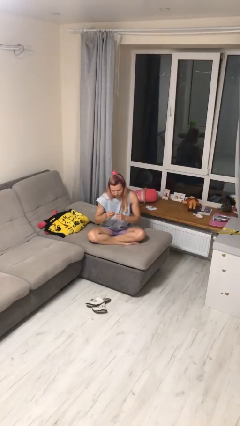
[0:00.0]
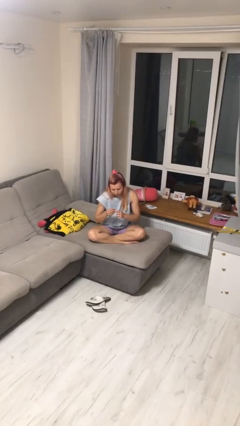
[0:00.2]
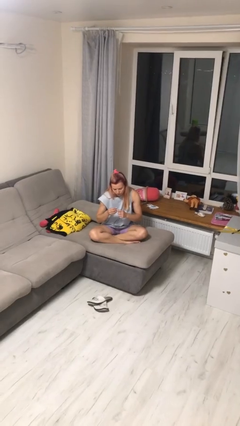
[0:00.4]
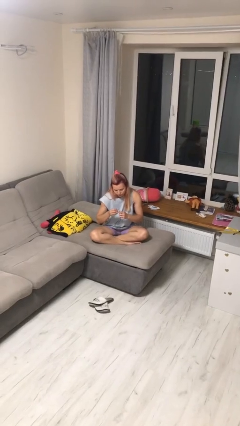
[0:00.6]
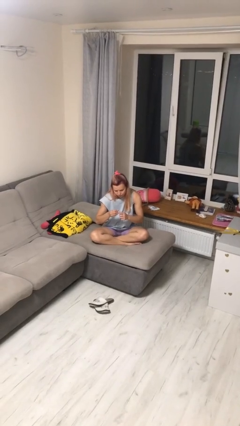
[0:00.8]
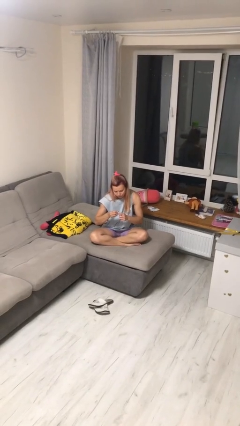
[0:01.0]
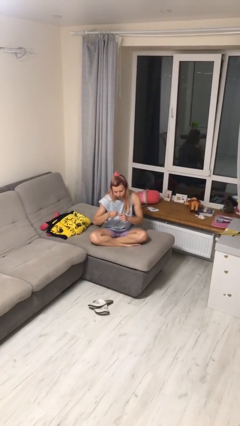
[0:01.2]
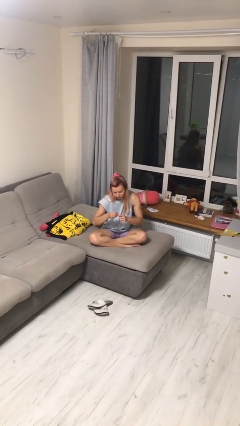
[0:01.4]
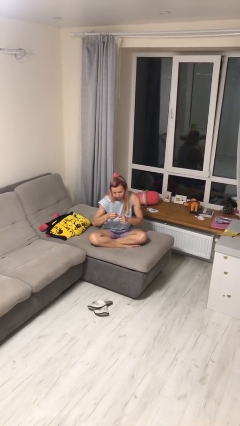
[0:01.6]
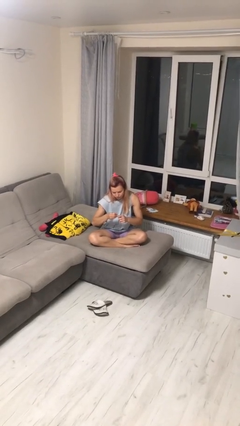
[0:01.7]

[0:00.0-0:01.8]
person clips fingernails

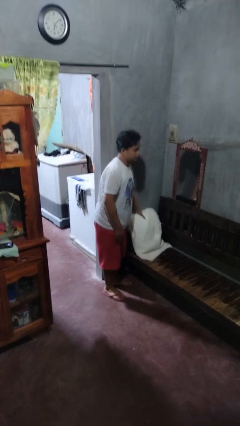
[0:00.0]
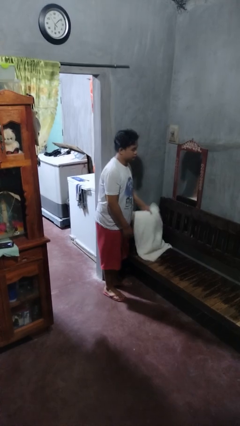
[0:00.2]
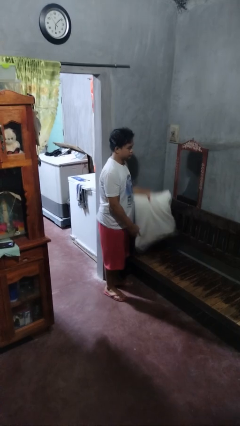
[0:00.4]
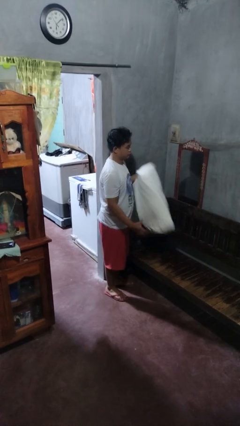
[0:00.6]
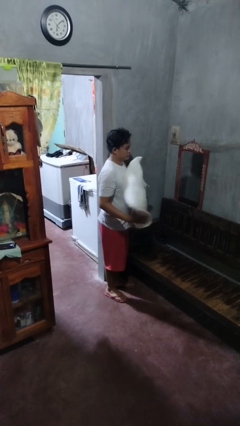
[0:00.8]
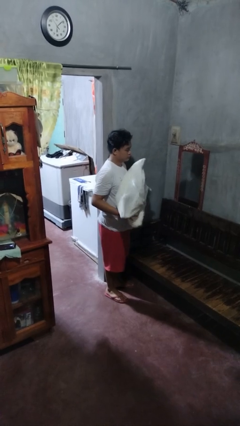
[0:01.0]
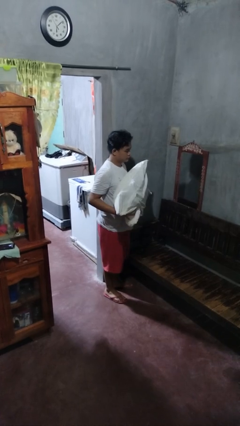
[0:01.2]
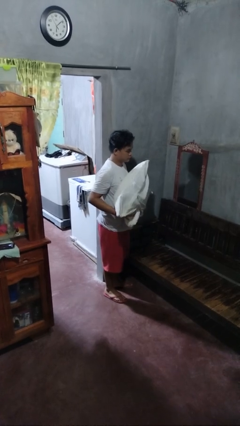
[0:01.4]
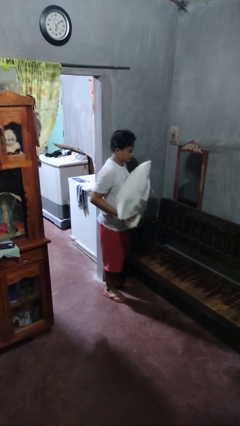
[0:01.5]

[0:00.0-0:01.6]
person picks up object from couch

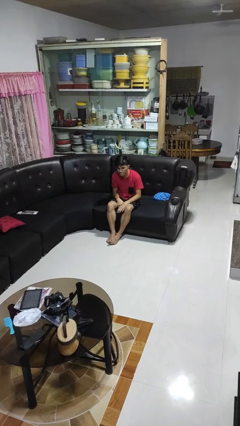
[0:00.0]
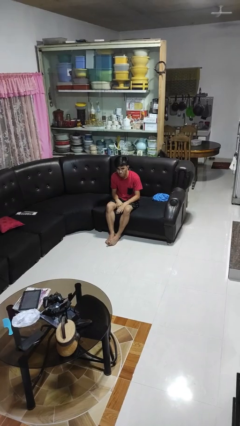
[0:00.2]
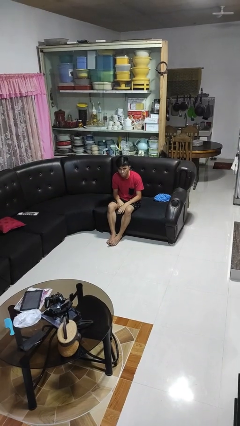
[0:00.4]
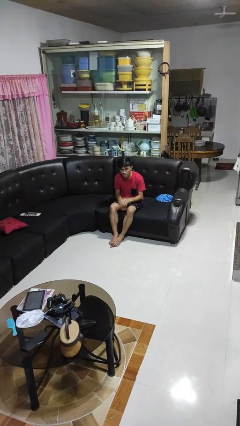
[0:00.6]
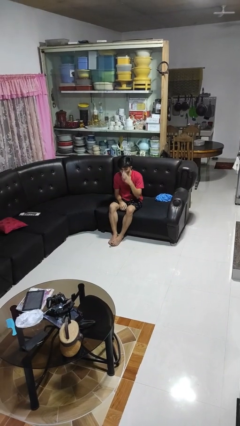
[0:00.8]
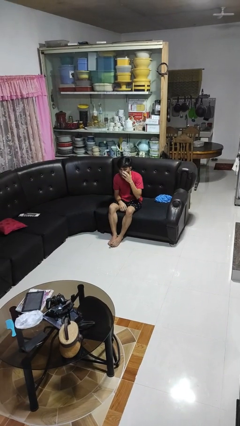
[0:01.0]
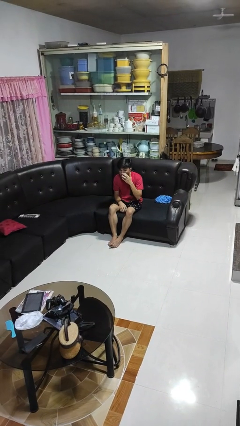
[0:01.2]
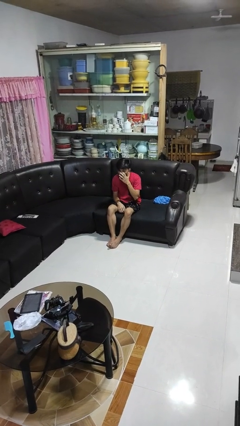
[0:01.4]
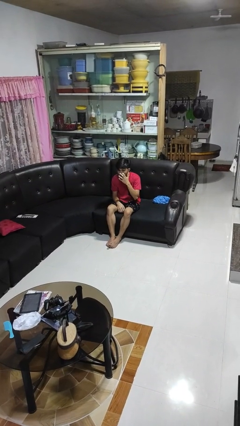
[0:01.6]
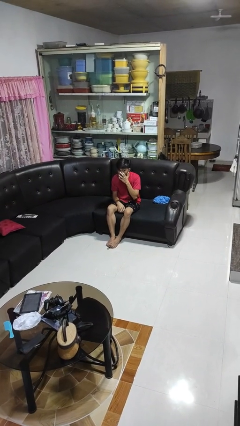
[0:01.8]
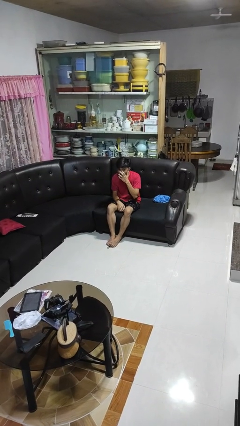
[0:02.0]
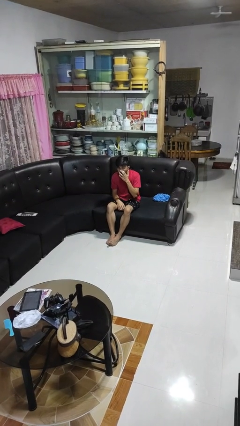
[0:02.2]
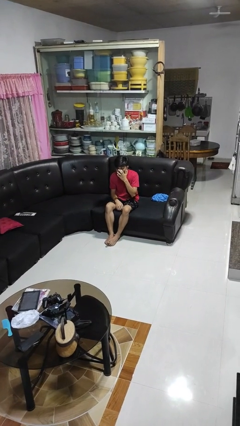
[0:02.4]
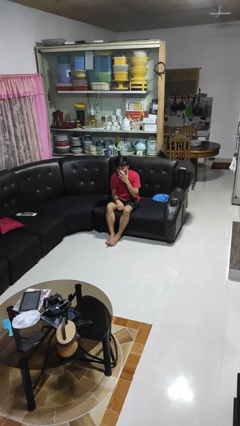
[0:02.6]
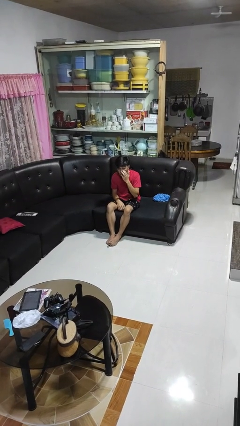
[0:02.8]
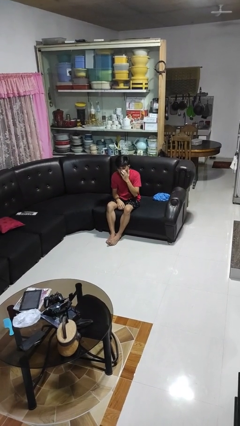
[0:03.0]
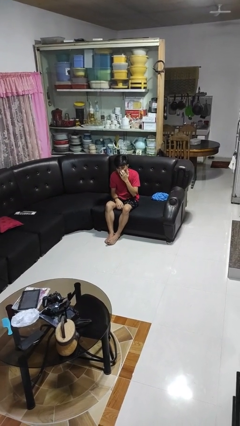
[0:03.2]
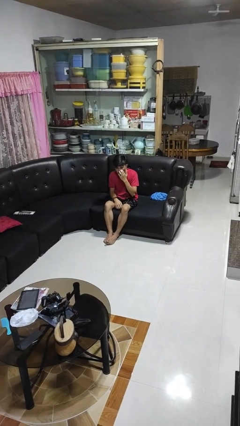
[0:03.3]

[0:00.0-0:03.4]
person scratches face

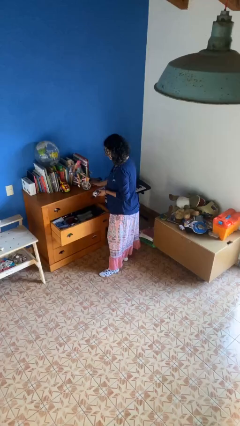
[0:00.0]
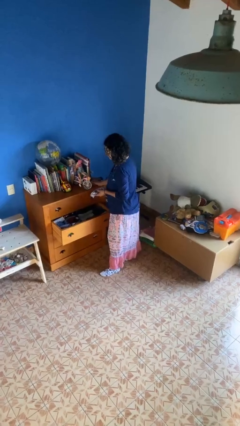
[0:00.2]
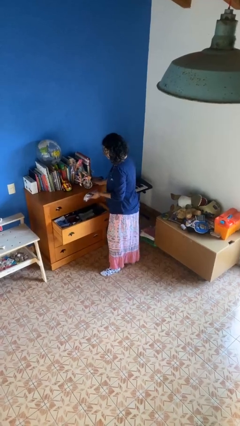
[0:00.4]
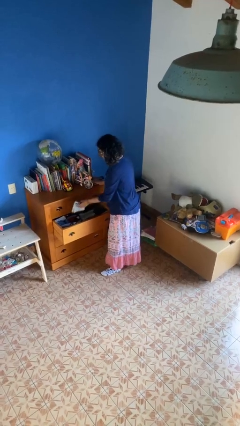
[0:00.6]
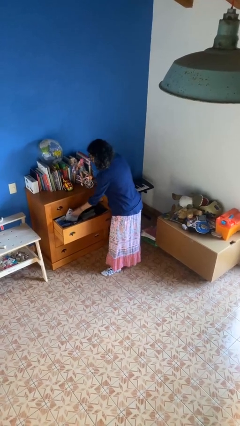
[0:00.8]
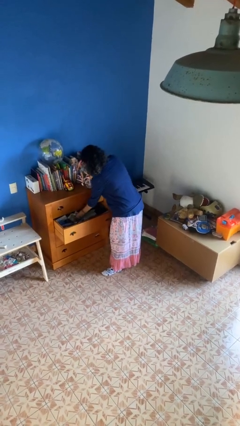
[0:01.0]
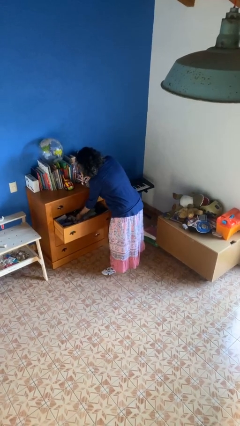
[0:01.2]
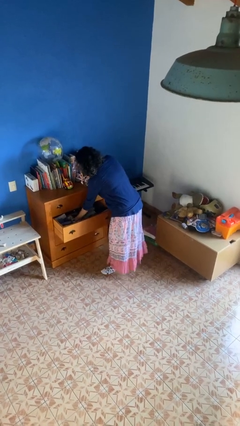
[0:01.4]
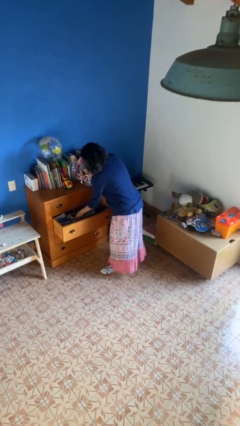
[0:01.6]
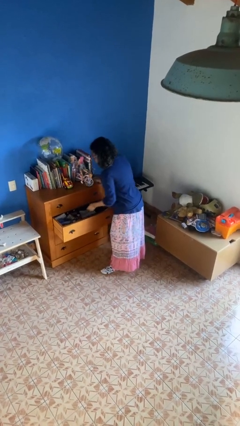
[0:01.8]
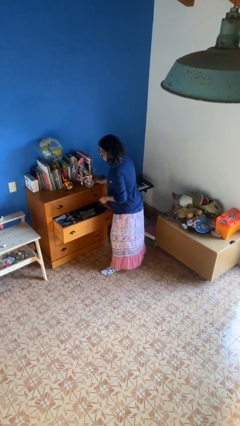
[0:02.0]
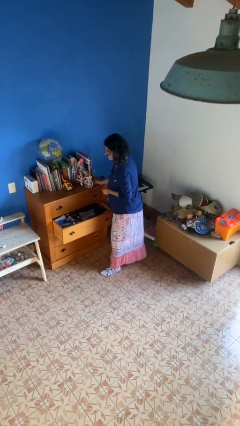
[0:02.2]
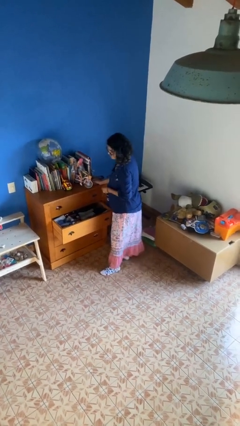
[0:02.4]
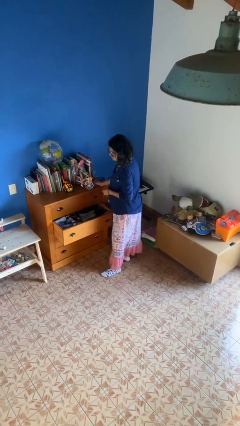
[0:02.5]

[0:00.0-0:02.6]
person puts clothes into dresser

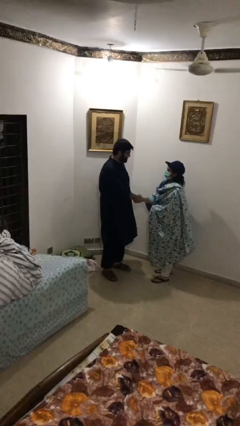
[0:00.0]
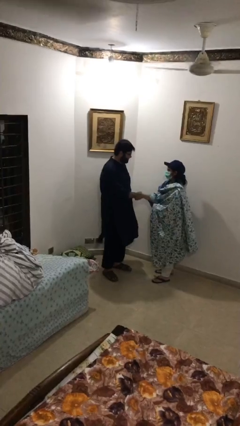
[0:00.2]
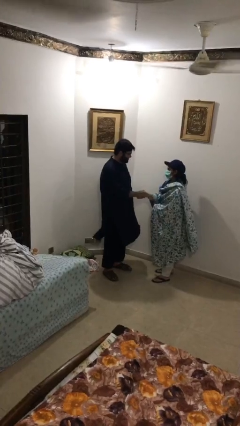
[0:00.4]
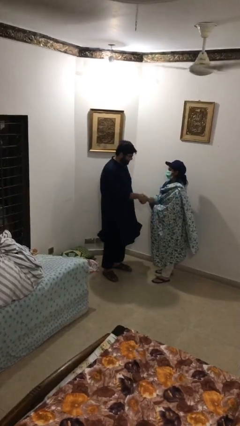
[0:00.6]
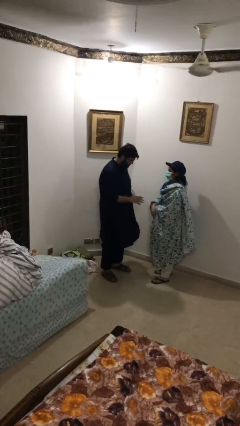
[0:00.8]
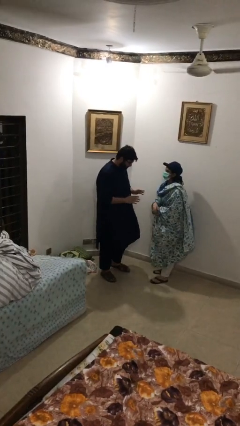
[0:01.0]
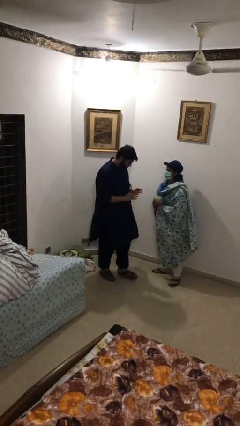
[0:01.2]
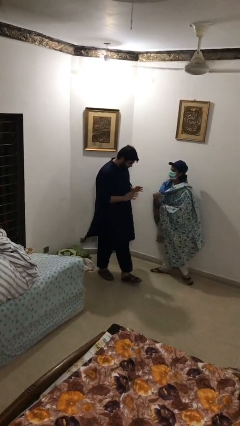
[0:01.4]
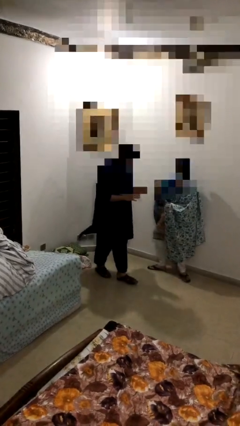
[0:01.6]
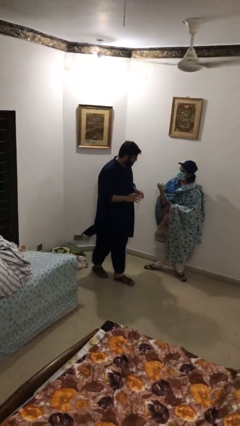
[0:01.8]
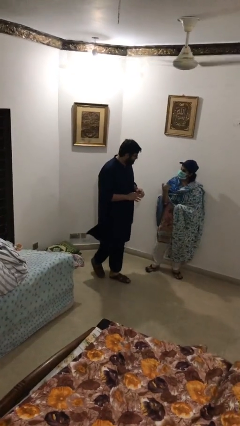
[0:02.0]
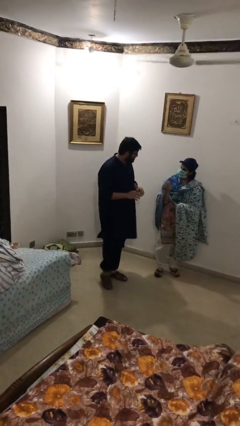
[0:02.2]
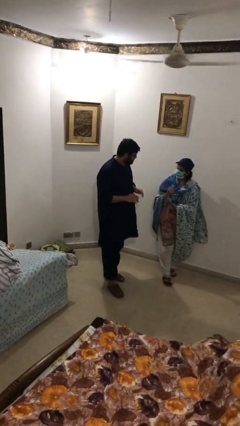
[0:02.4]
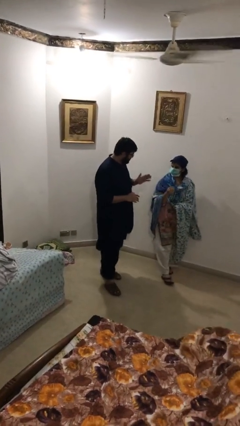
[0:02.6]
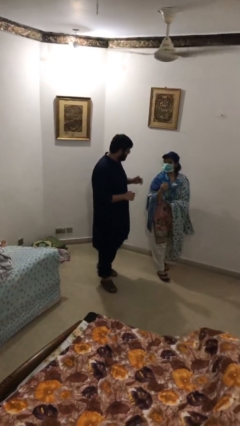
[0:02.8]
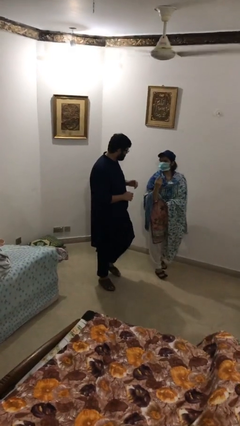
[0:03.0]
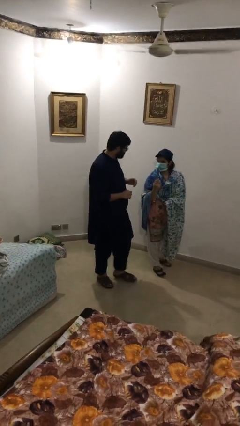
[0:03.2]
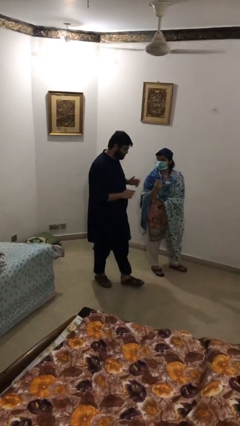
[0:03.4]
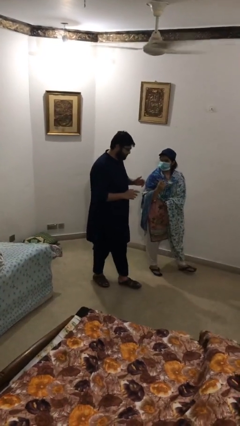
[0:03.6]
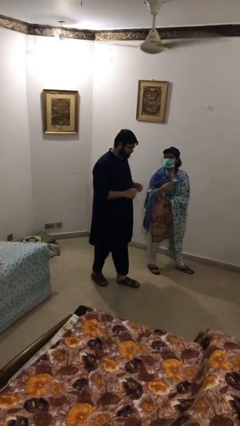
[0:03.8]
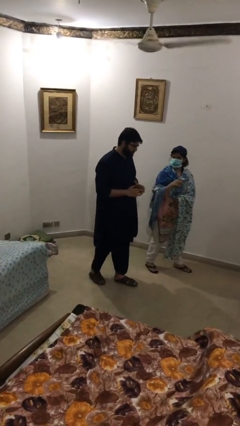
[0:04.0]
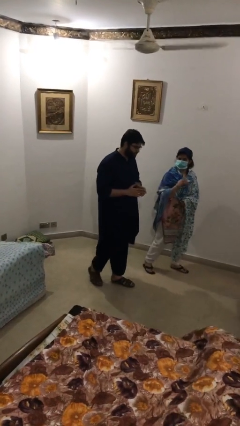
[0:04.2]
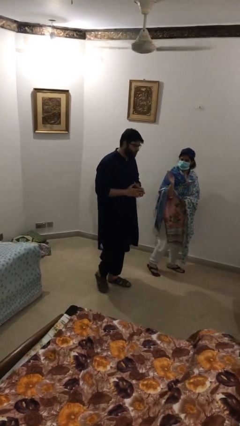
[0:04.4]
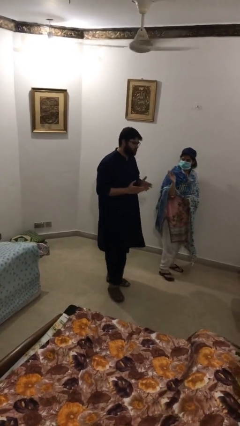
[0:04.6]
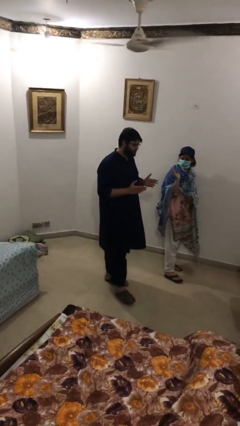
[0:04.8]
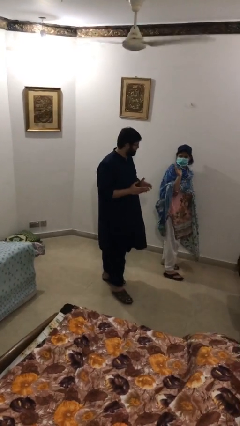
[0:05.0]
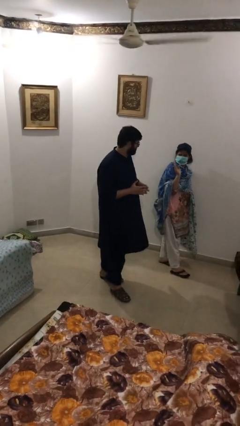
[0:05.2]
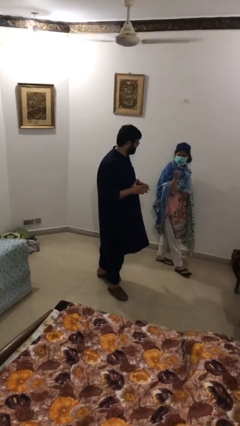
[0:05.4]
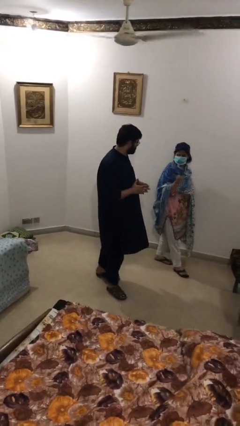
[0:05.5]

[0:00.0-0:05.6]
person talks to person

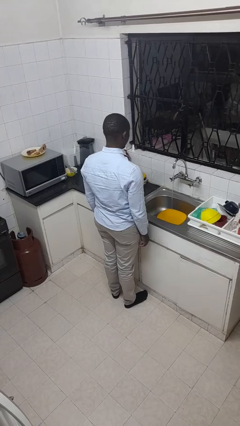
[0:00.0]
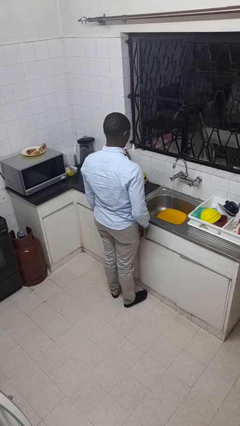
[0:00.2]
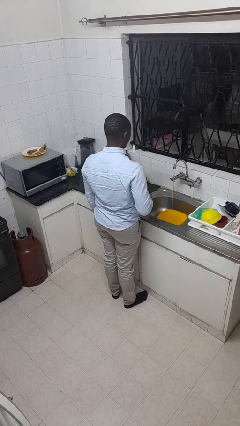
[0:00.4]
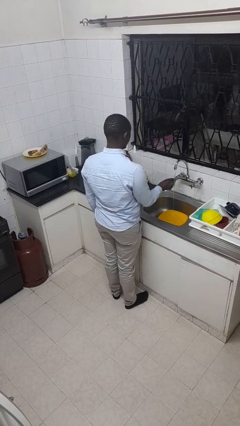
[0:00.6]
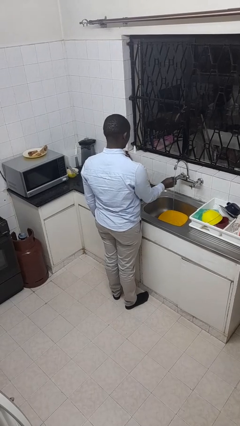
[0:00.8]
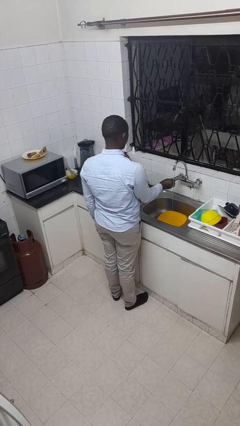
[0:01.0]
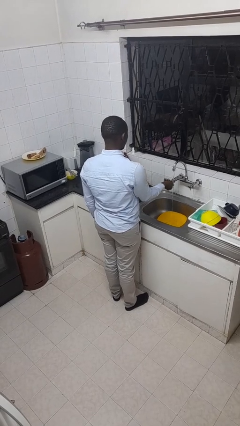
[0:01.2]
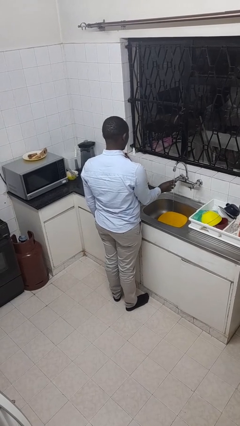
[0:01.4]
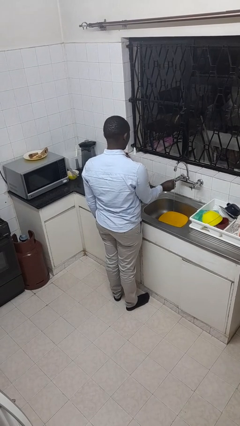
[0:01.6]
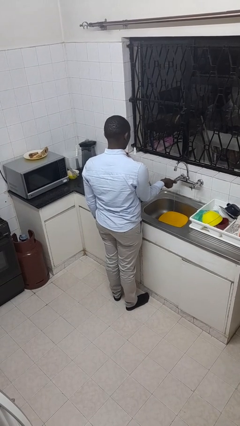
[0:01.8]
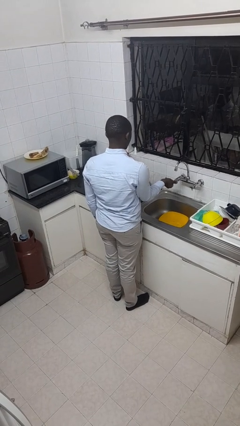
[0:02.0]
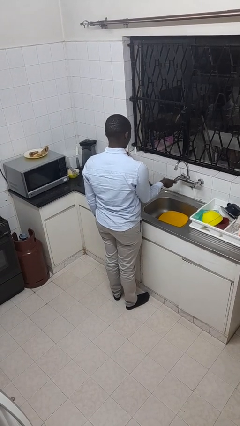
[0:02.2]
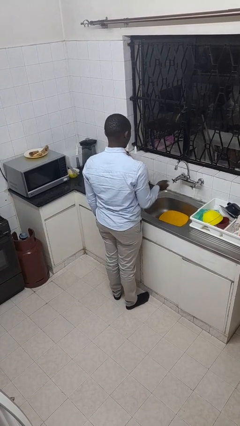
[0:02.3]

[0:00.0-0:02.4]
person turns off faucet
